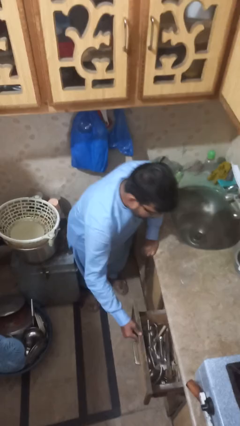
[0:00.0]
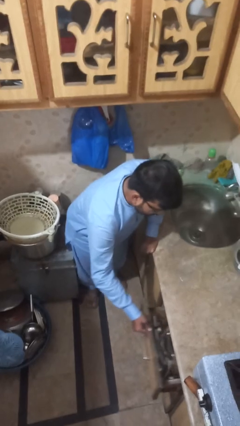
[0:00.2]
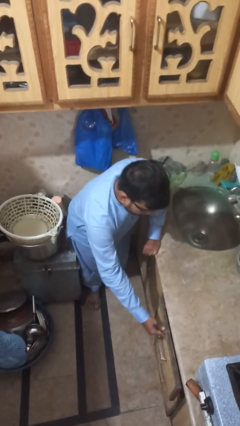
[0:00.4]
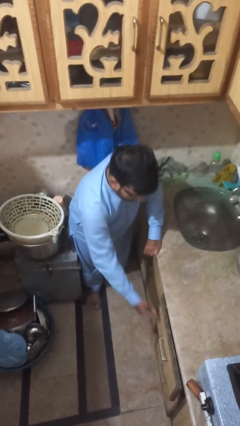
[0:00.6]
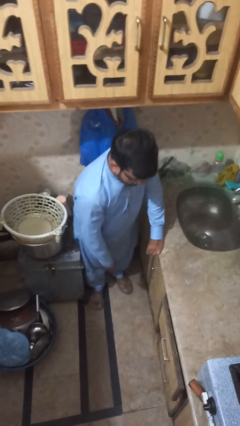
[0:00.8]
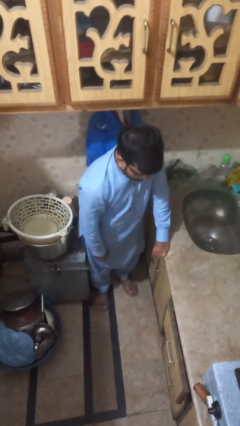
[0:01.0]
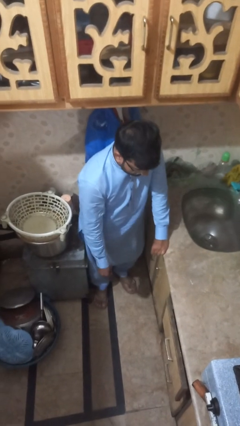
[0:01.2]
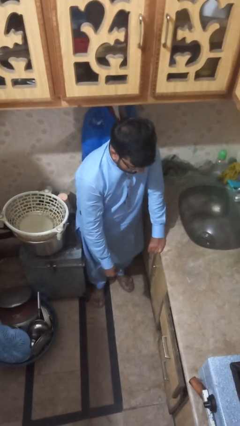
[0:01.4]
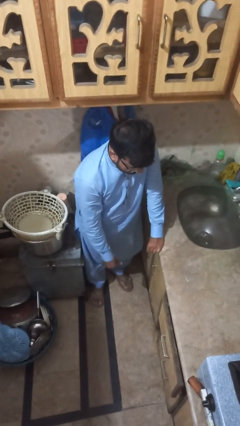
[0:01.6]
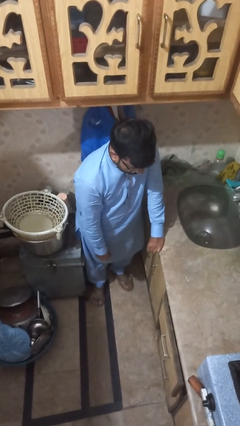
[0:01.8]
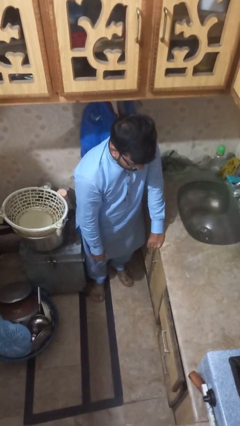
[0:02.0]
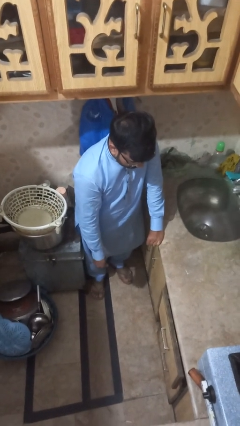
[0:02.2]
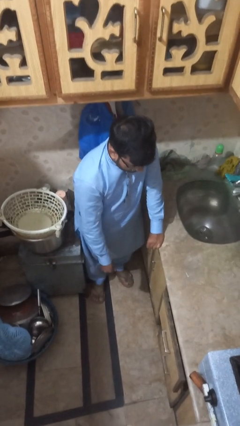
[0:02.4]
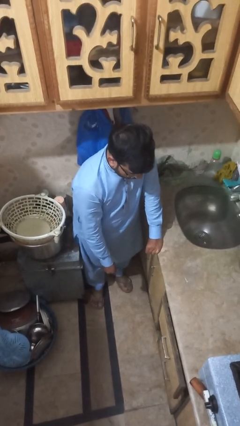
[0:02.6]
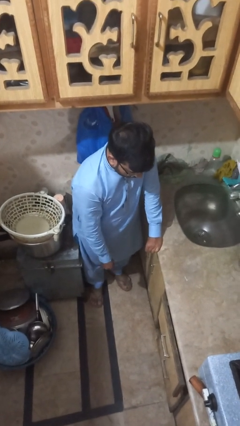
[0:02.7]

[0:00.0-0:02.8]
person closes kitchen drawer

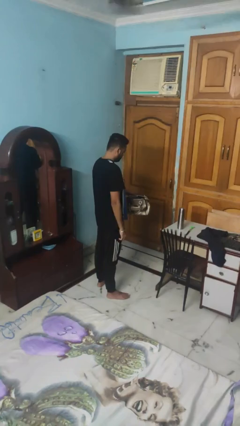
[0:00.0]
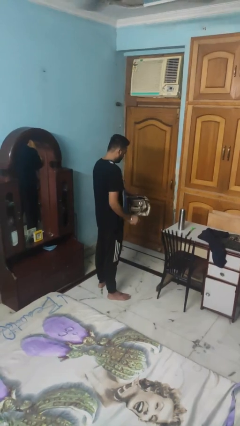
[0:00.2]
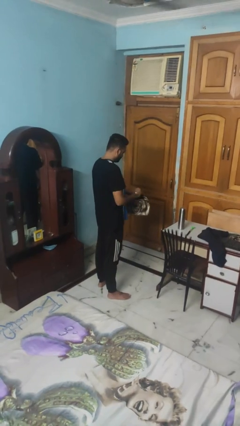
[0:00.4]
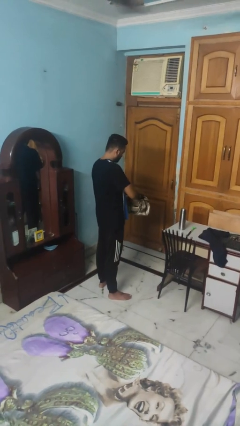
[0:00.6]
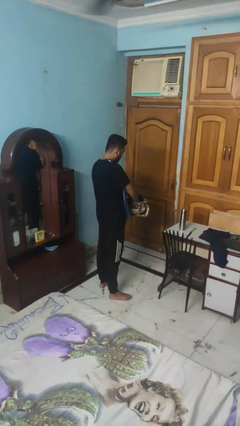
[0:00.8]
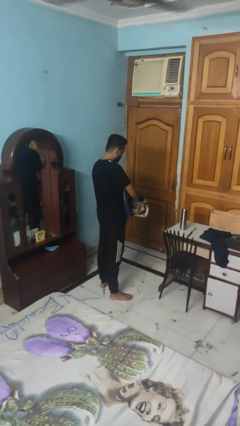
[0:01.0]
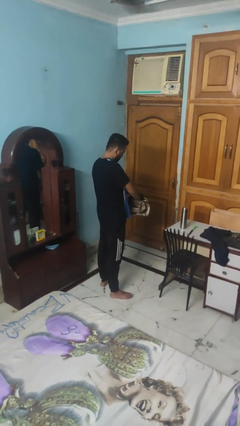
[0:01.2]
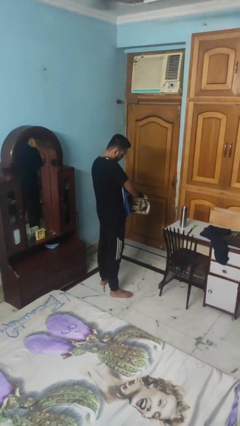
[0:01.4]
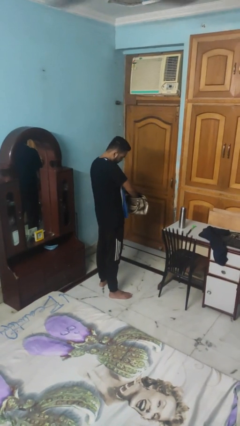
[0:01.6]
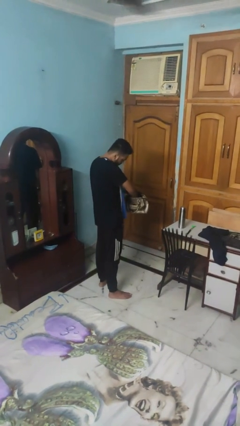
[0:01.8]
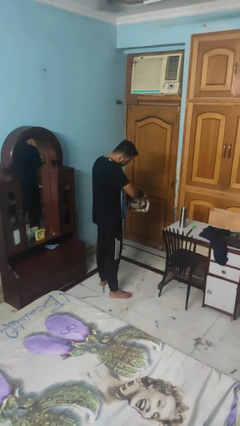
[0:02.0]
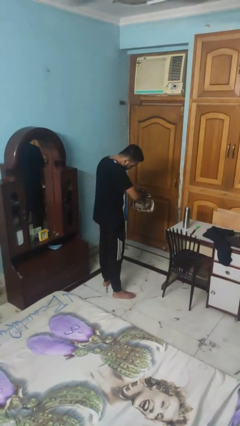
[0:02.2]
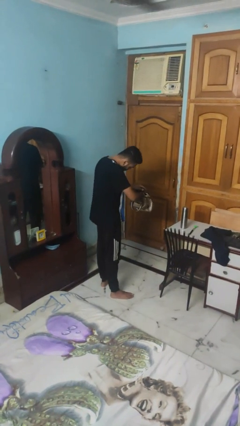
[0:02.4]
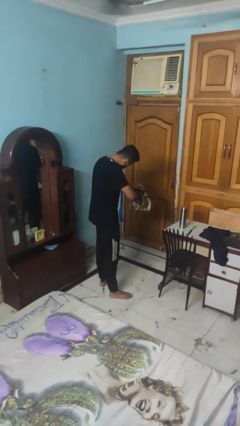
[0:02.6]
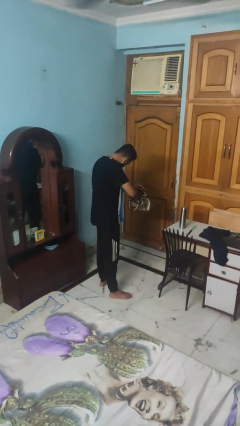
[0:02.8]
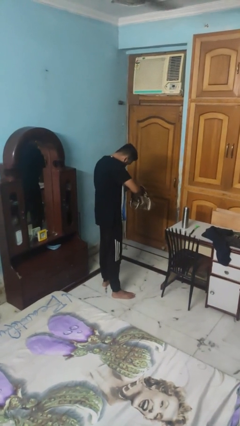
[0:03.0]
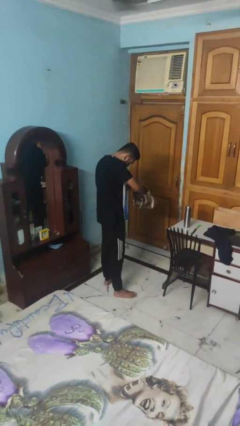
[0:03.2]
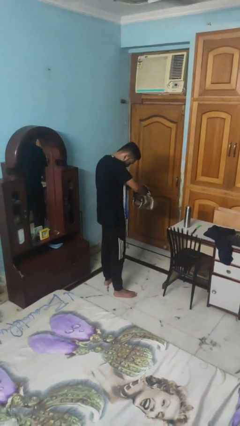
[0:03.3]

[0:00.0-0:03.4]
person searches in purse

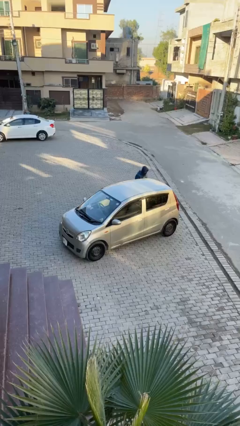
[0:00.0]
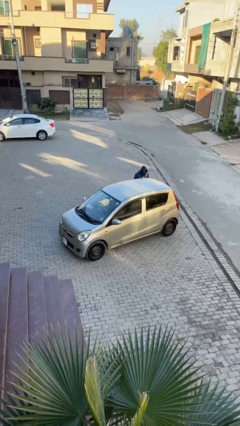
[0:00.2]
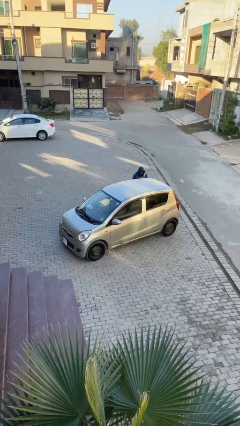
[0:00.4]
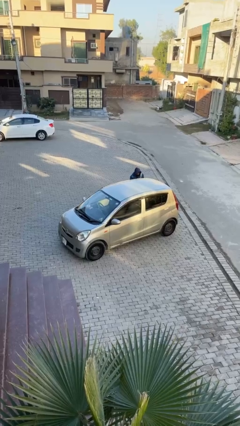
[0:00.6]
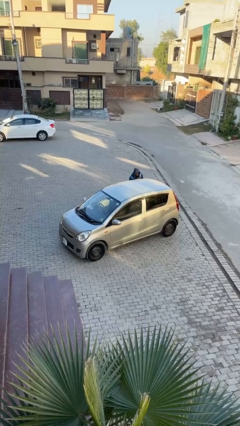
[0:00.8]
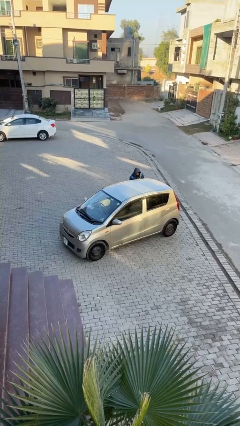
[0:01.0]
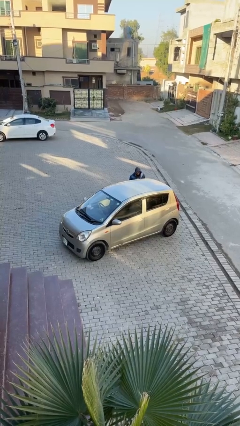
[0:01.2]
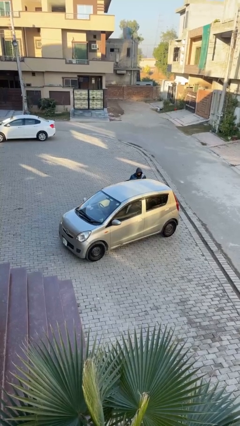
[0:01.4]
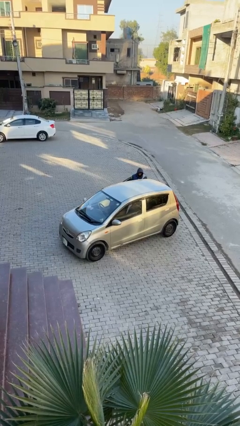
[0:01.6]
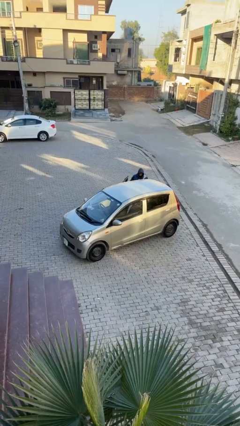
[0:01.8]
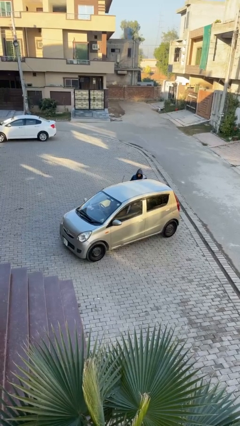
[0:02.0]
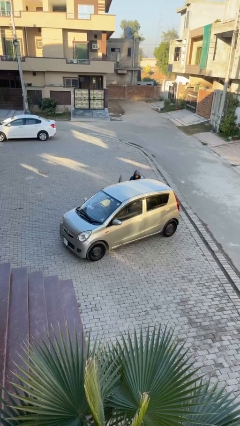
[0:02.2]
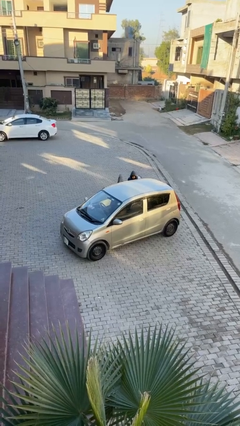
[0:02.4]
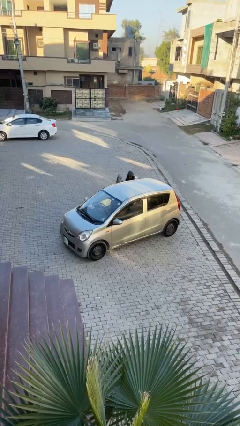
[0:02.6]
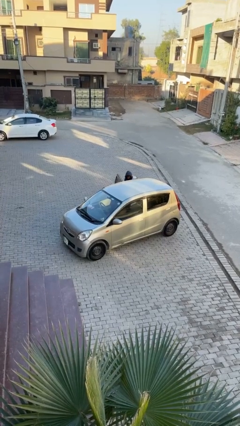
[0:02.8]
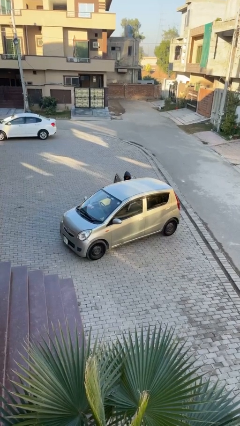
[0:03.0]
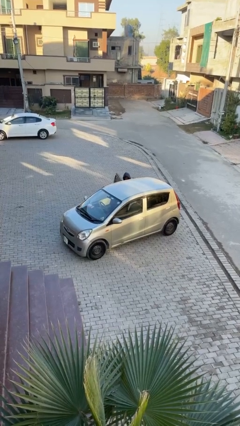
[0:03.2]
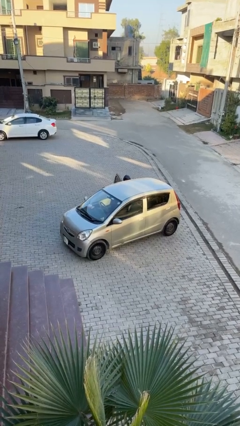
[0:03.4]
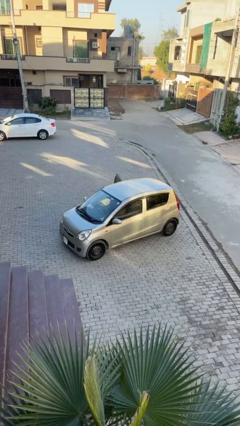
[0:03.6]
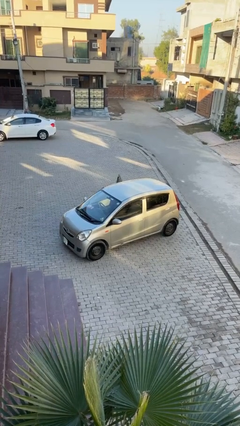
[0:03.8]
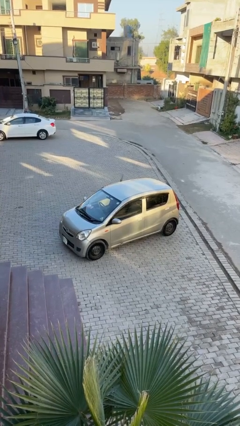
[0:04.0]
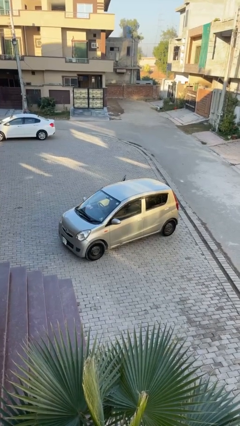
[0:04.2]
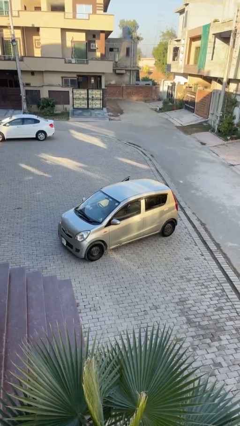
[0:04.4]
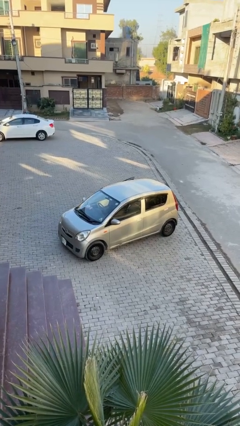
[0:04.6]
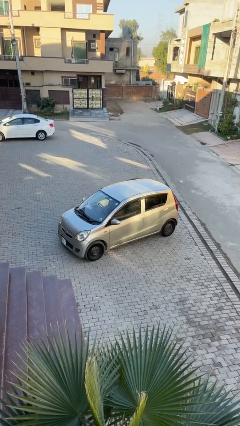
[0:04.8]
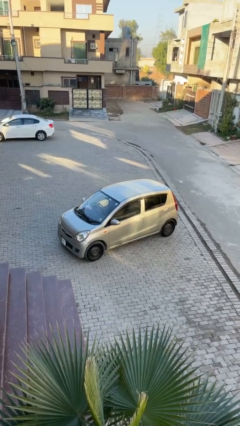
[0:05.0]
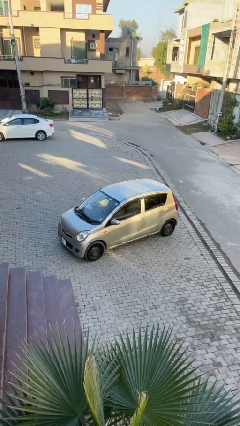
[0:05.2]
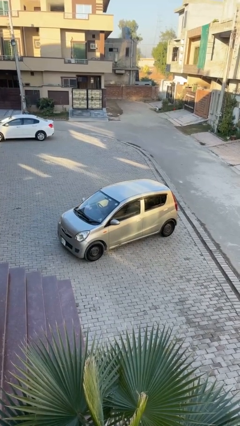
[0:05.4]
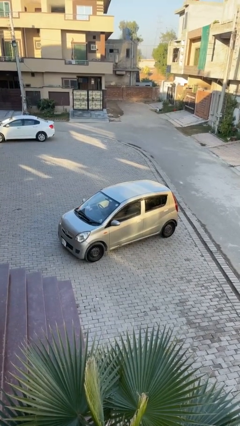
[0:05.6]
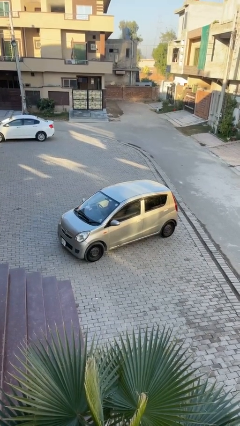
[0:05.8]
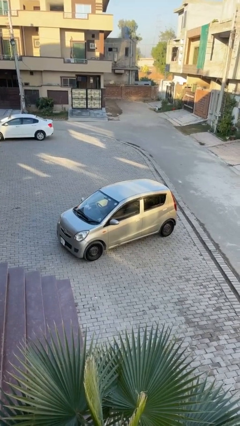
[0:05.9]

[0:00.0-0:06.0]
car picks up person

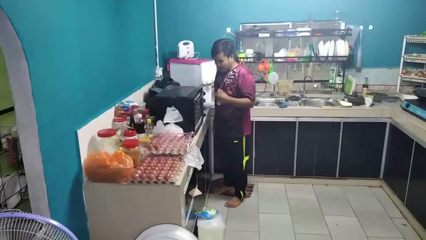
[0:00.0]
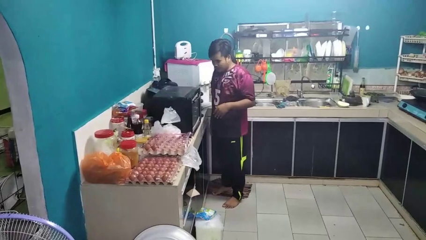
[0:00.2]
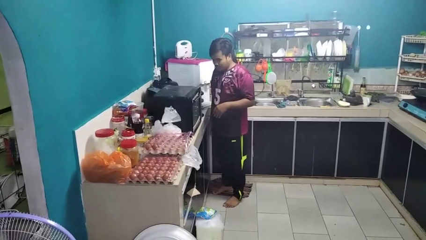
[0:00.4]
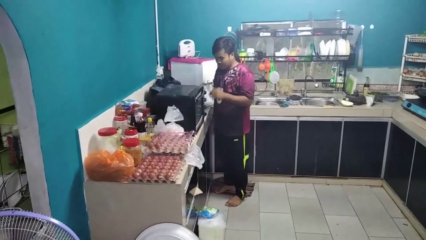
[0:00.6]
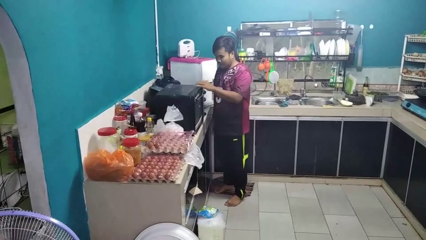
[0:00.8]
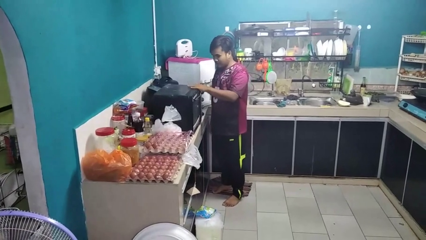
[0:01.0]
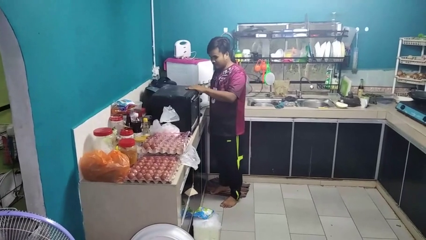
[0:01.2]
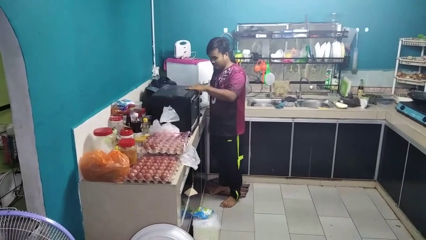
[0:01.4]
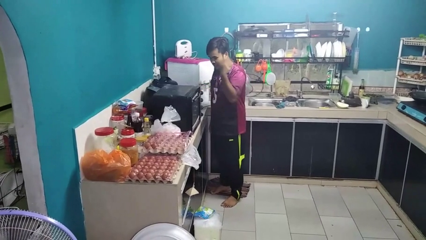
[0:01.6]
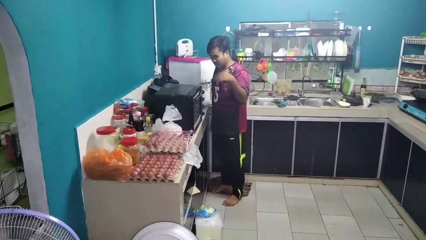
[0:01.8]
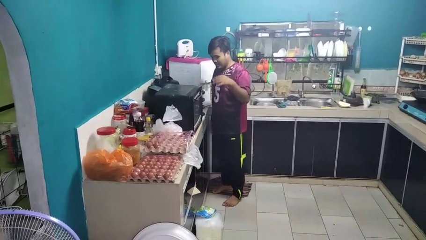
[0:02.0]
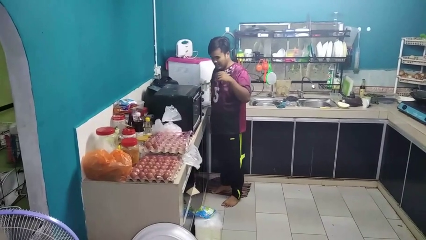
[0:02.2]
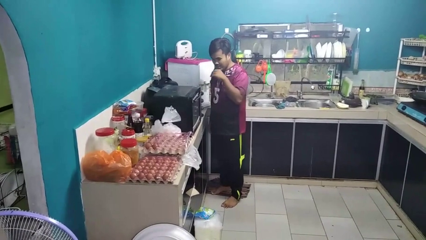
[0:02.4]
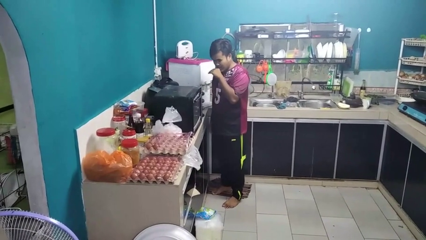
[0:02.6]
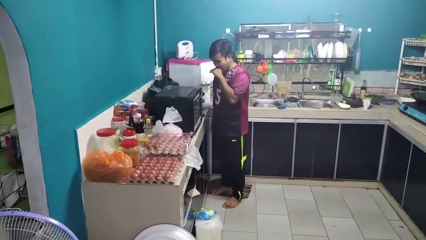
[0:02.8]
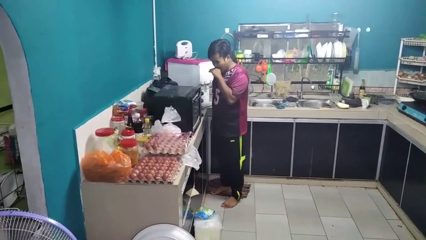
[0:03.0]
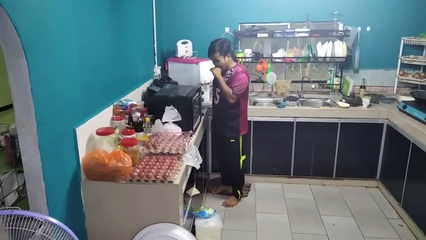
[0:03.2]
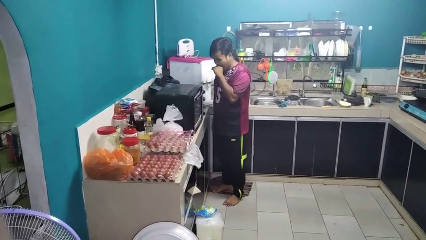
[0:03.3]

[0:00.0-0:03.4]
person burns hand

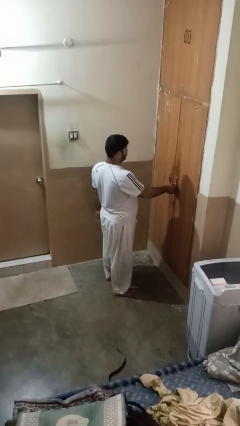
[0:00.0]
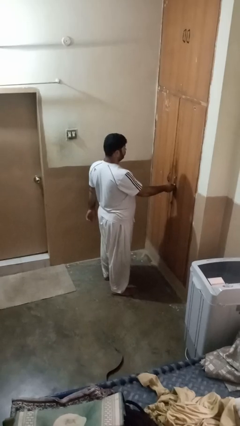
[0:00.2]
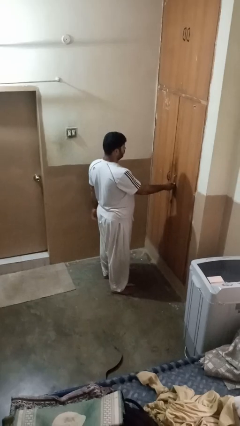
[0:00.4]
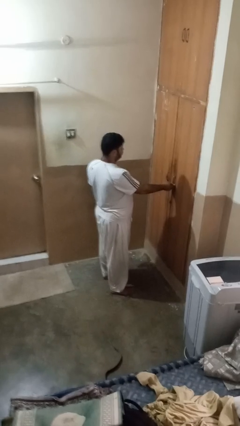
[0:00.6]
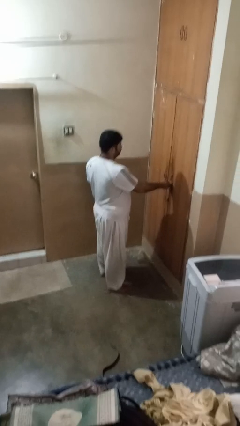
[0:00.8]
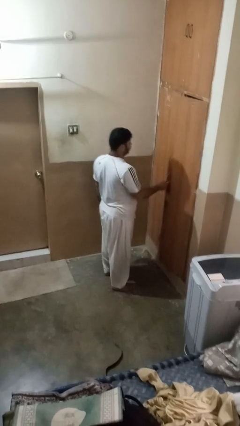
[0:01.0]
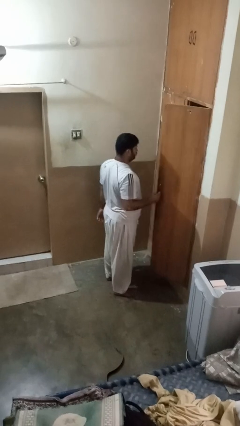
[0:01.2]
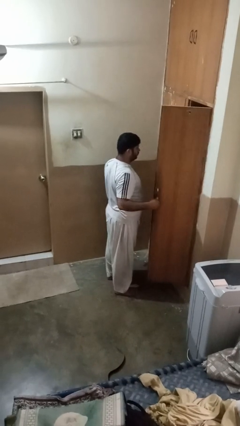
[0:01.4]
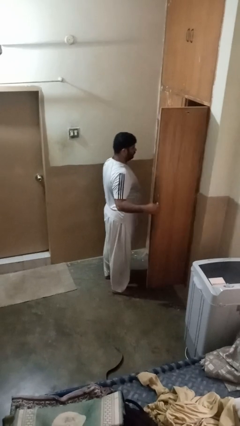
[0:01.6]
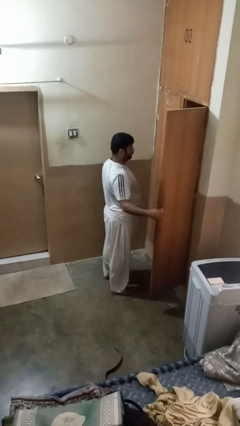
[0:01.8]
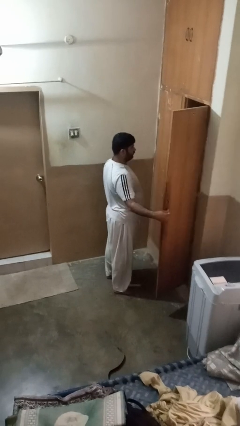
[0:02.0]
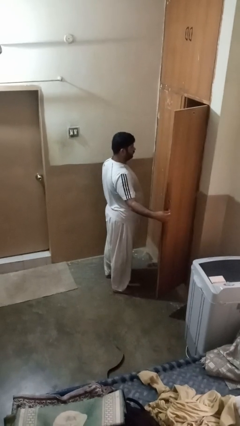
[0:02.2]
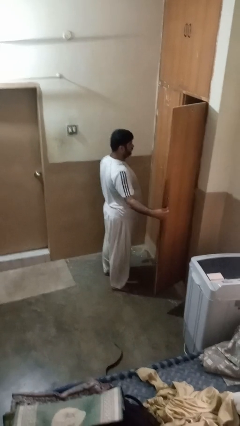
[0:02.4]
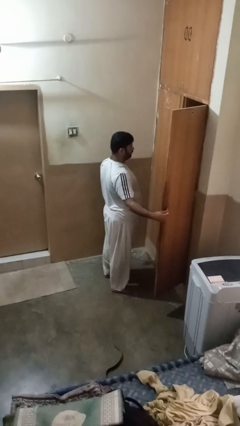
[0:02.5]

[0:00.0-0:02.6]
person opens closet door
